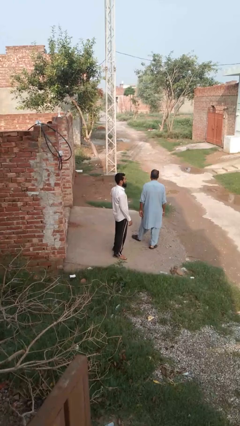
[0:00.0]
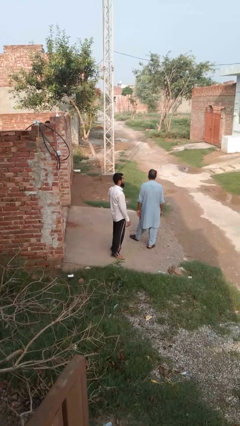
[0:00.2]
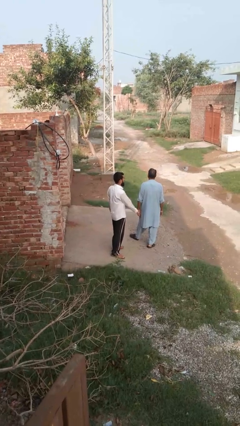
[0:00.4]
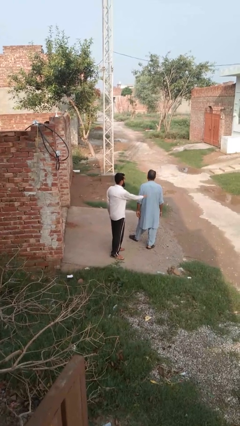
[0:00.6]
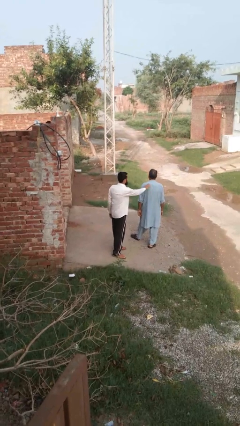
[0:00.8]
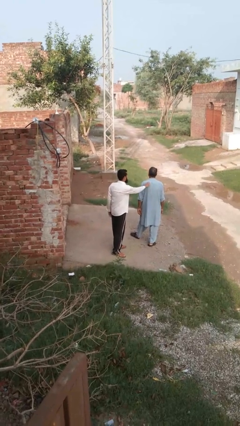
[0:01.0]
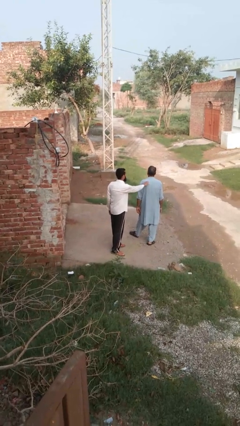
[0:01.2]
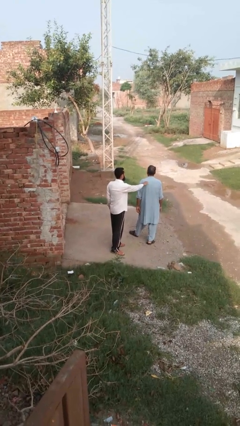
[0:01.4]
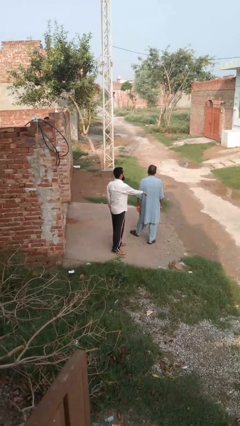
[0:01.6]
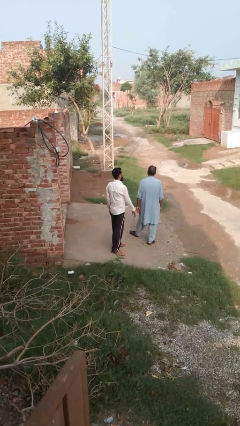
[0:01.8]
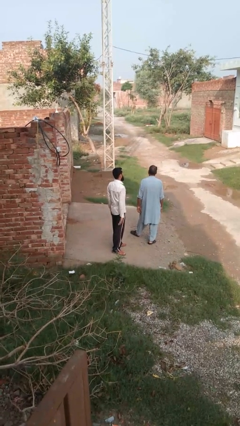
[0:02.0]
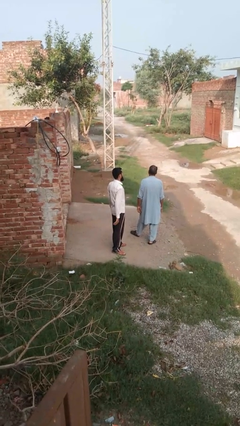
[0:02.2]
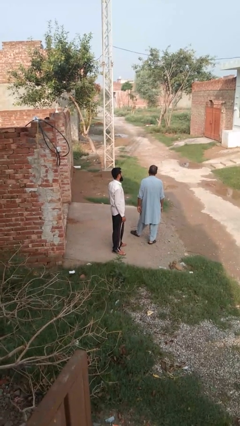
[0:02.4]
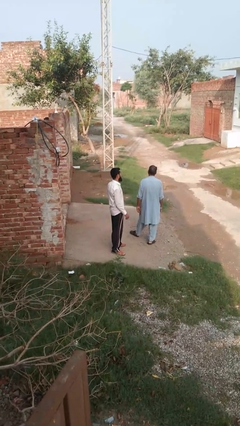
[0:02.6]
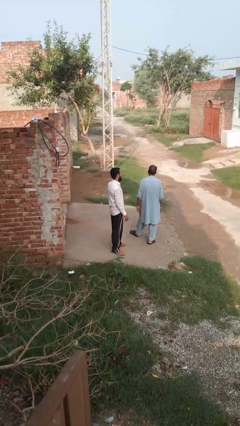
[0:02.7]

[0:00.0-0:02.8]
person touches back of person

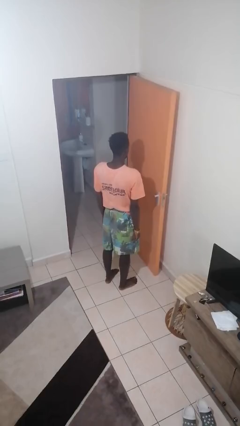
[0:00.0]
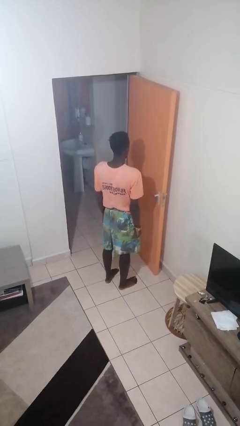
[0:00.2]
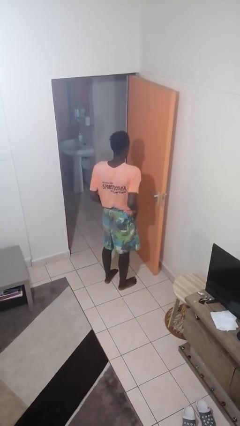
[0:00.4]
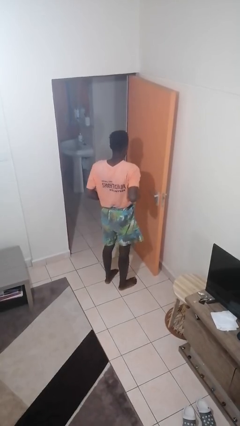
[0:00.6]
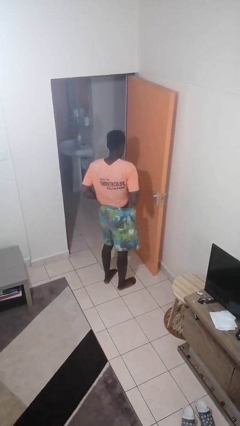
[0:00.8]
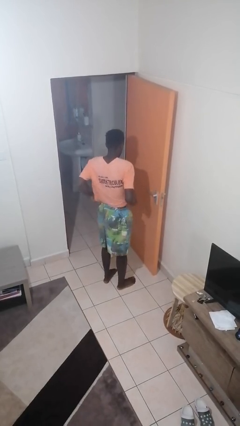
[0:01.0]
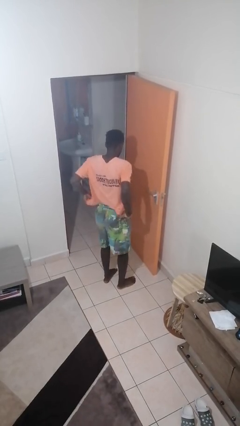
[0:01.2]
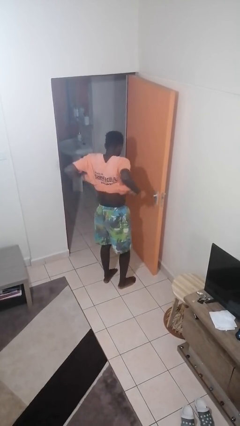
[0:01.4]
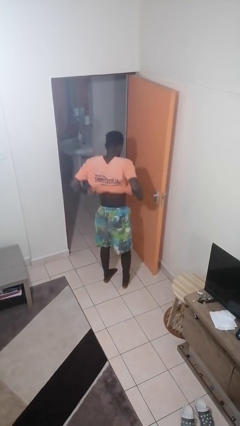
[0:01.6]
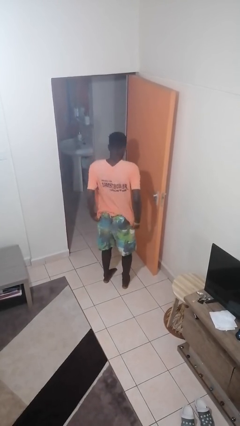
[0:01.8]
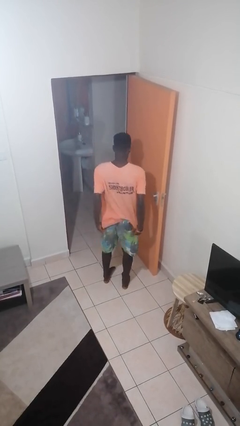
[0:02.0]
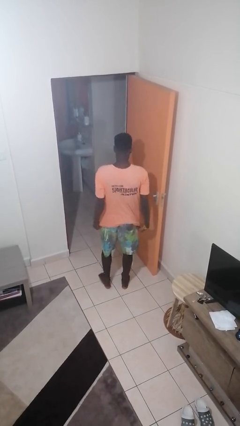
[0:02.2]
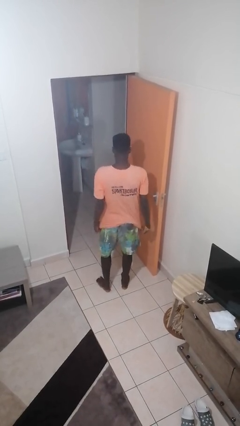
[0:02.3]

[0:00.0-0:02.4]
person untucks shirt

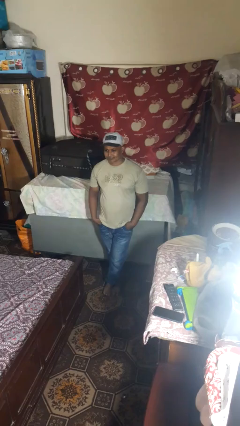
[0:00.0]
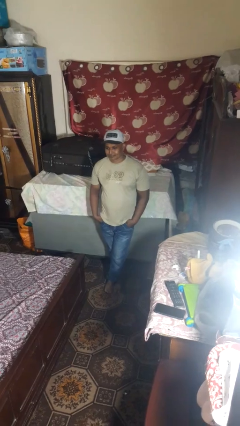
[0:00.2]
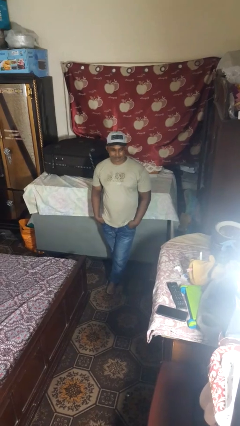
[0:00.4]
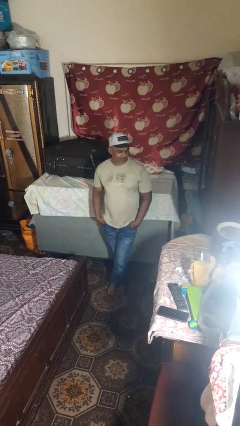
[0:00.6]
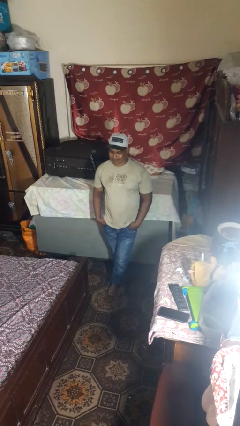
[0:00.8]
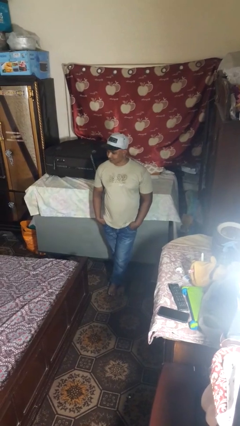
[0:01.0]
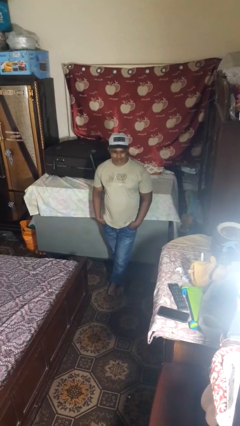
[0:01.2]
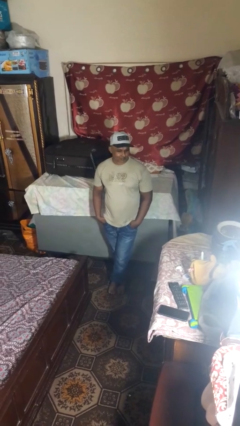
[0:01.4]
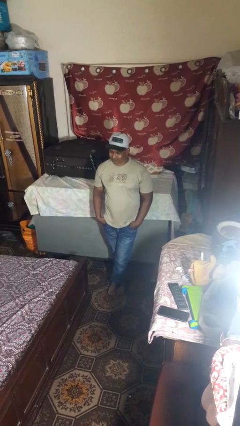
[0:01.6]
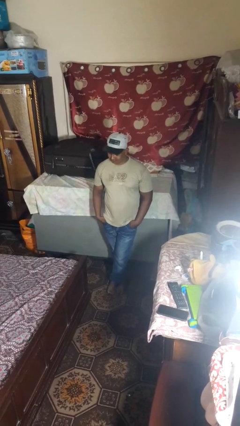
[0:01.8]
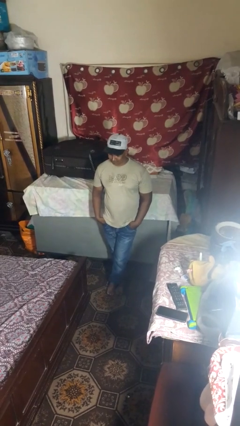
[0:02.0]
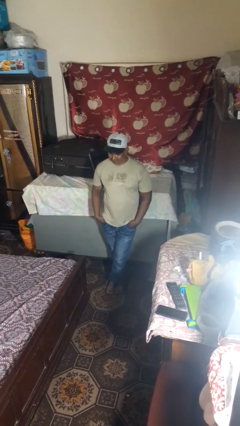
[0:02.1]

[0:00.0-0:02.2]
person shakes head

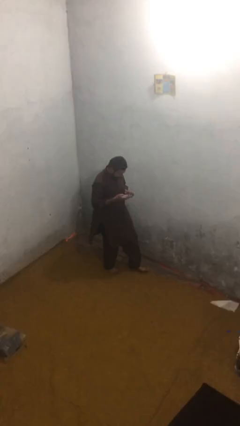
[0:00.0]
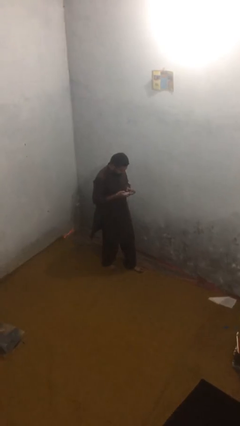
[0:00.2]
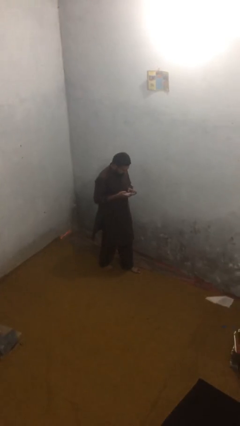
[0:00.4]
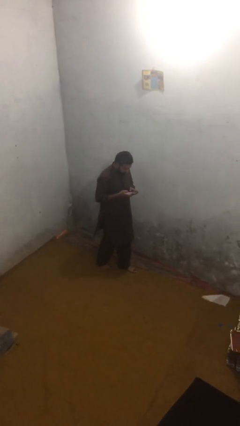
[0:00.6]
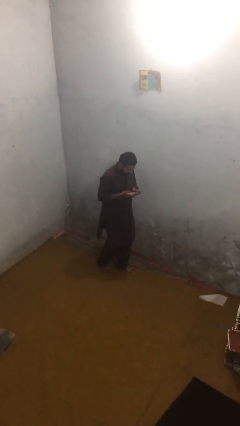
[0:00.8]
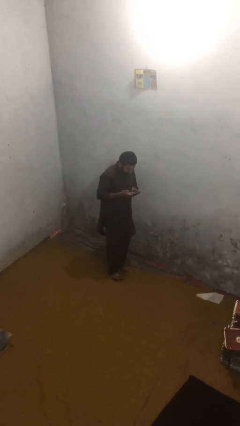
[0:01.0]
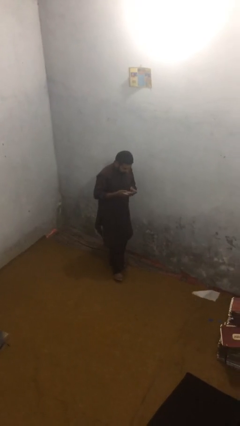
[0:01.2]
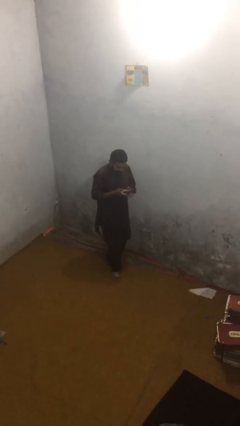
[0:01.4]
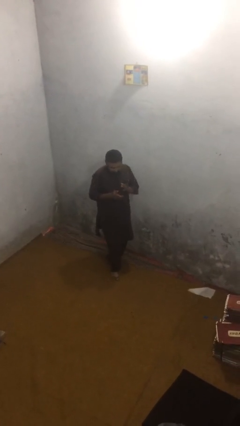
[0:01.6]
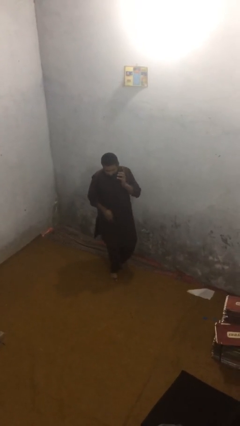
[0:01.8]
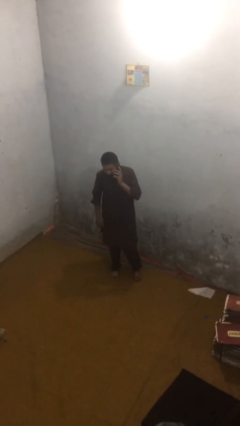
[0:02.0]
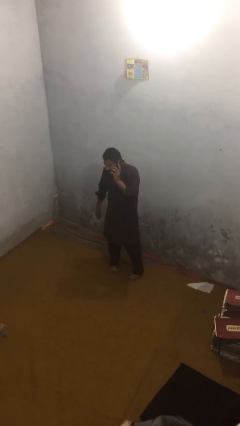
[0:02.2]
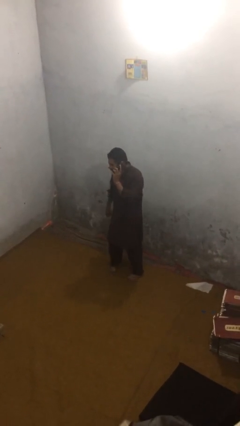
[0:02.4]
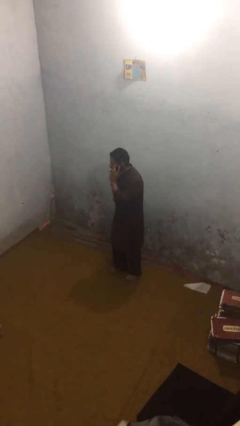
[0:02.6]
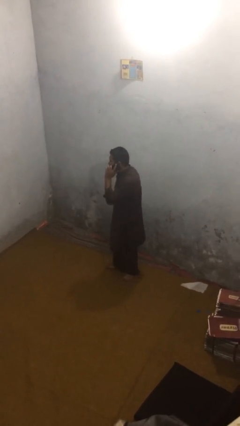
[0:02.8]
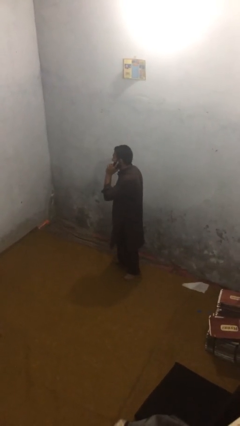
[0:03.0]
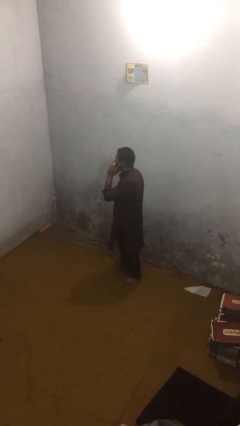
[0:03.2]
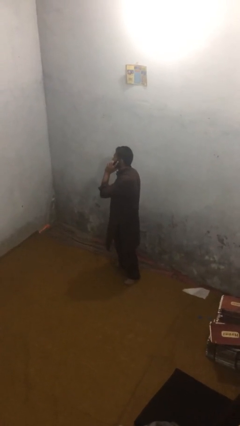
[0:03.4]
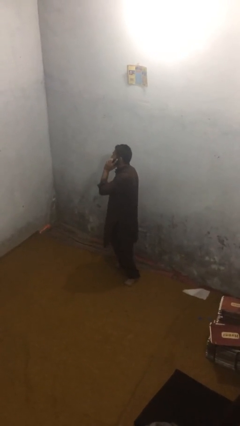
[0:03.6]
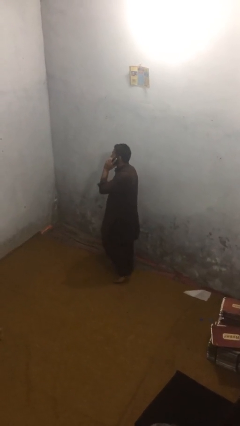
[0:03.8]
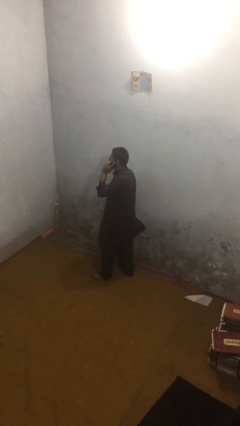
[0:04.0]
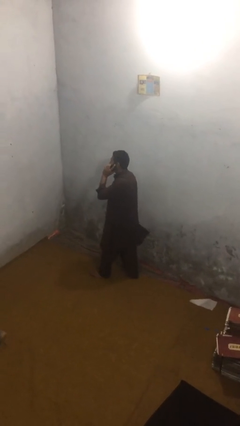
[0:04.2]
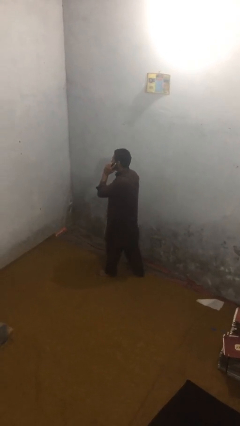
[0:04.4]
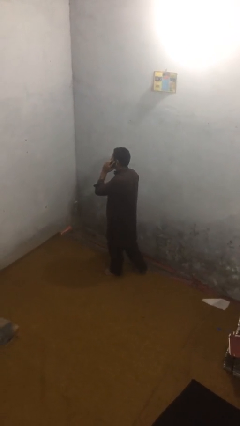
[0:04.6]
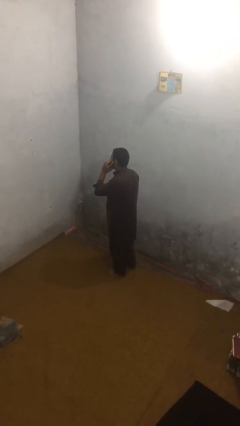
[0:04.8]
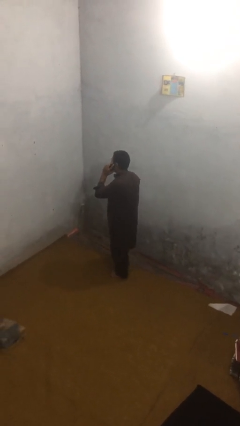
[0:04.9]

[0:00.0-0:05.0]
person talks on phone

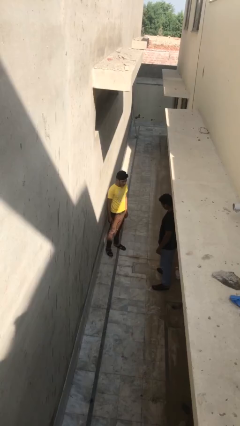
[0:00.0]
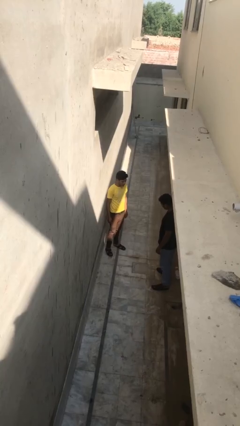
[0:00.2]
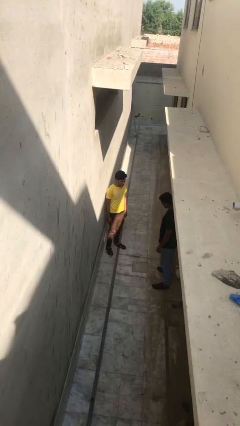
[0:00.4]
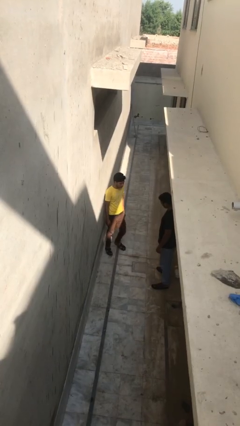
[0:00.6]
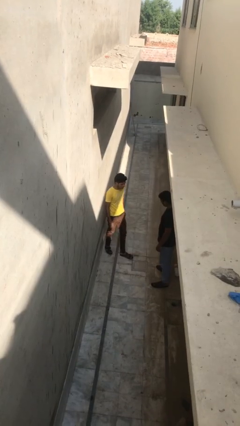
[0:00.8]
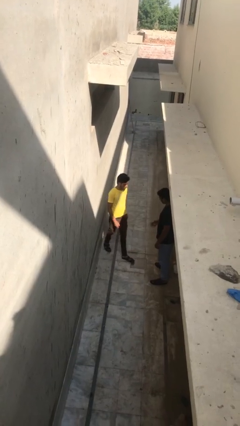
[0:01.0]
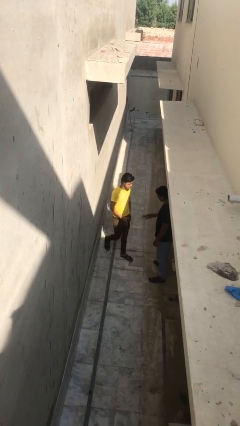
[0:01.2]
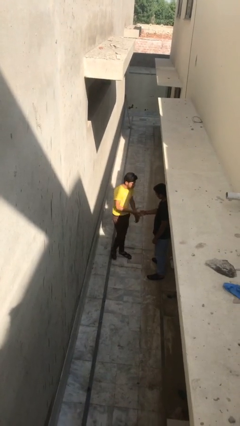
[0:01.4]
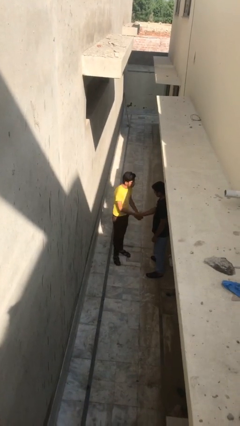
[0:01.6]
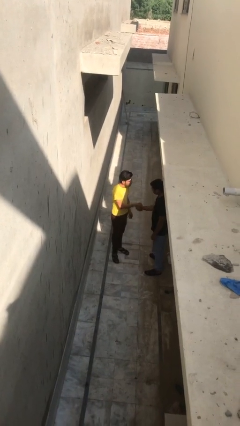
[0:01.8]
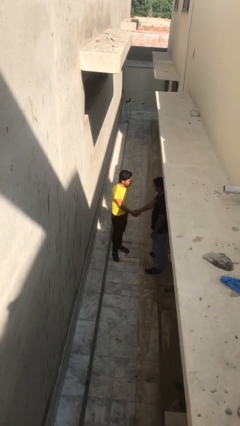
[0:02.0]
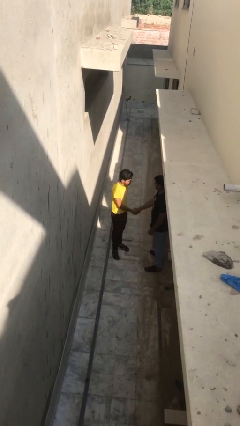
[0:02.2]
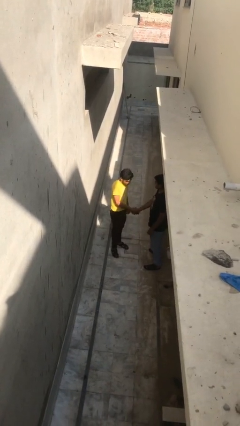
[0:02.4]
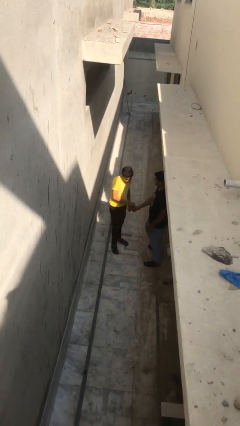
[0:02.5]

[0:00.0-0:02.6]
person shakes hand

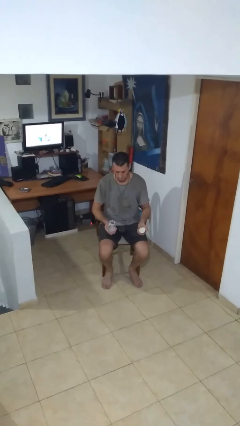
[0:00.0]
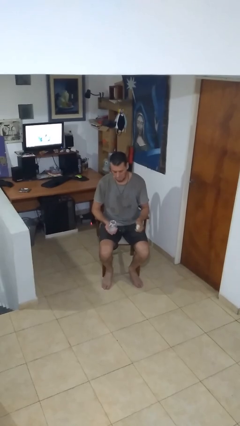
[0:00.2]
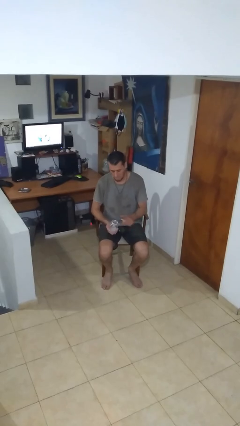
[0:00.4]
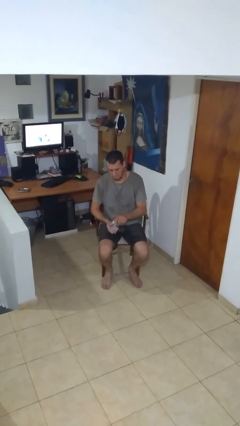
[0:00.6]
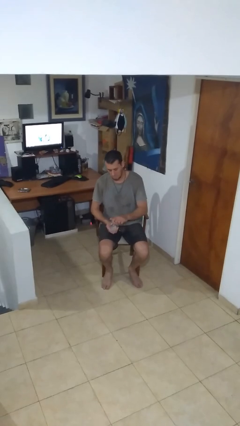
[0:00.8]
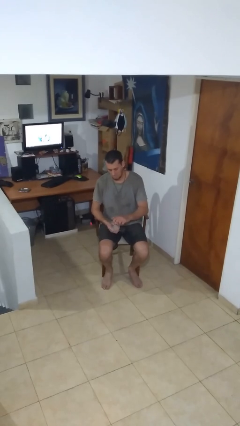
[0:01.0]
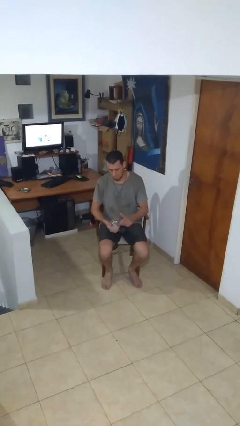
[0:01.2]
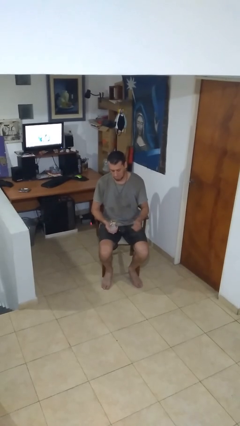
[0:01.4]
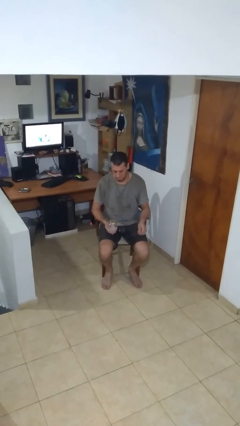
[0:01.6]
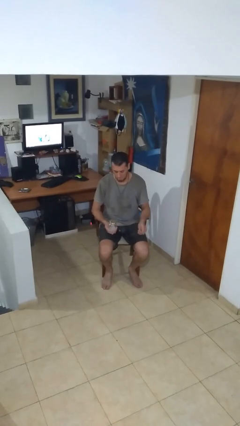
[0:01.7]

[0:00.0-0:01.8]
person closes jar

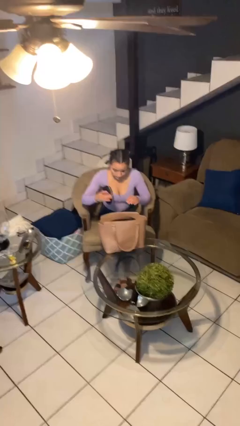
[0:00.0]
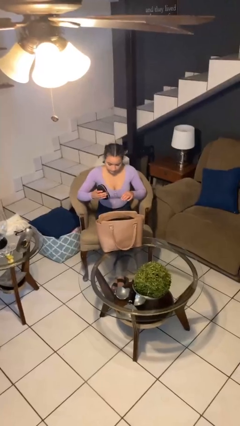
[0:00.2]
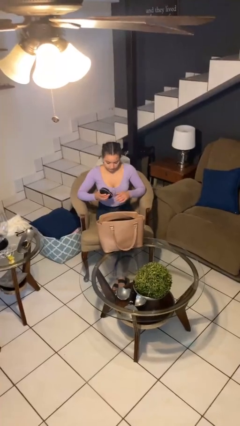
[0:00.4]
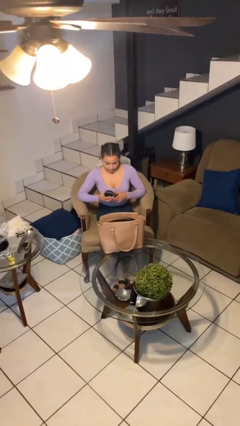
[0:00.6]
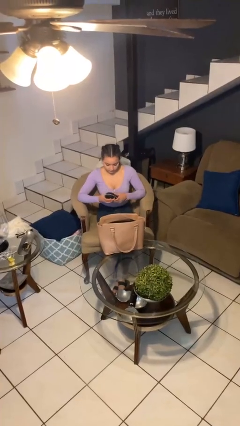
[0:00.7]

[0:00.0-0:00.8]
person takes object from purse
